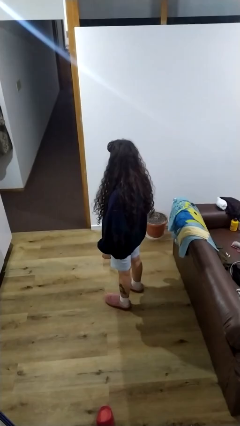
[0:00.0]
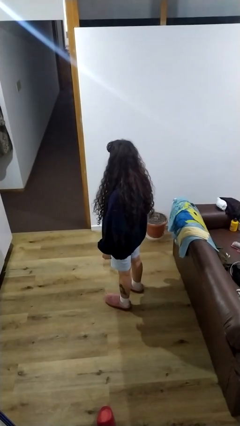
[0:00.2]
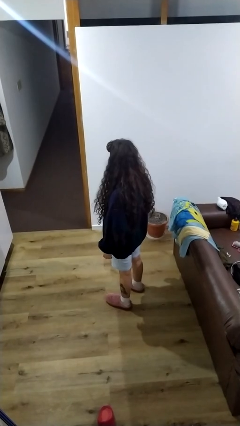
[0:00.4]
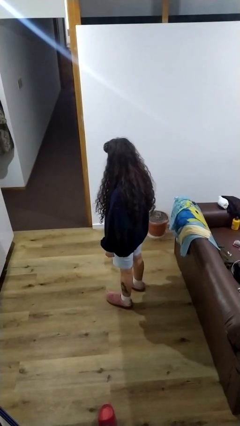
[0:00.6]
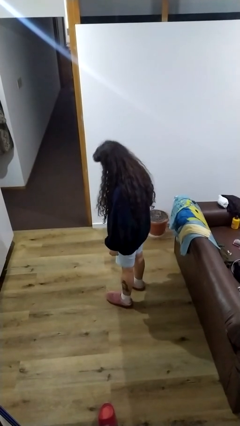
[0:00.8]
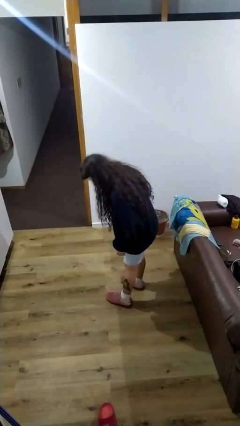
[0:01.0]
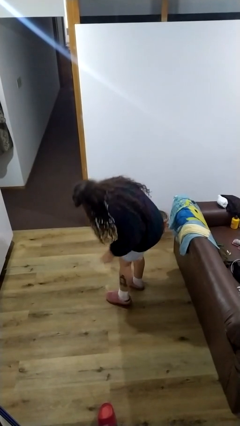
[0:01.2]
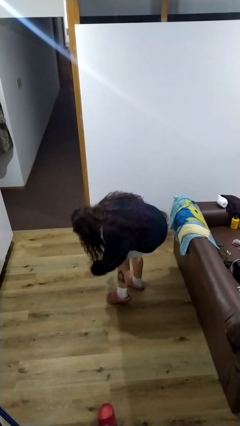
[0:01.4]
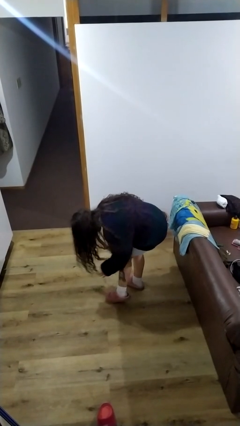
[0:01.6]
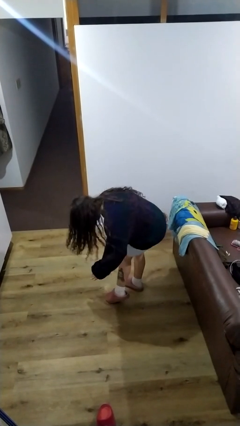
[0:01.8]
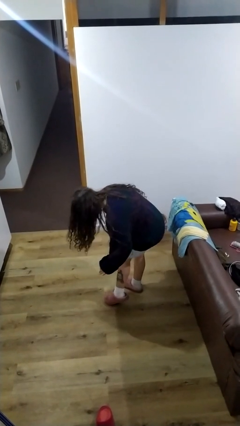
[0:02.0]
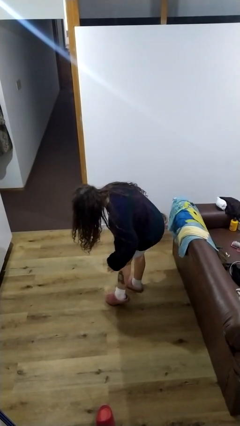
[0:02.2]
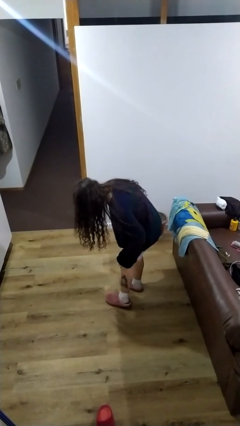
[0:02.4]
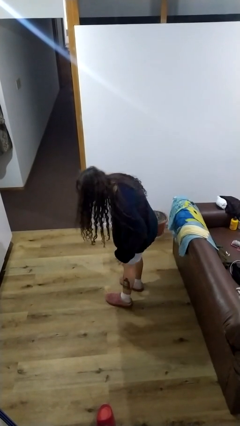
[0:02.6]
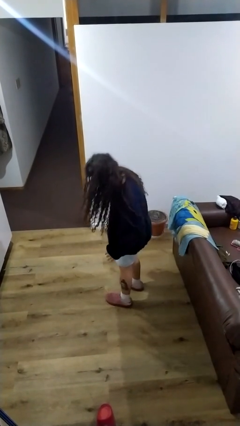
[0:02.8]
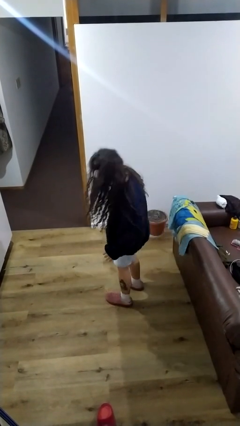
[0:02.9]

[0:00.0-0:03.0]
person swats bug

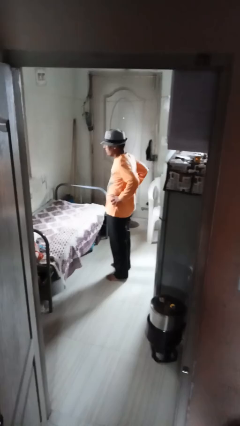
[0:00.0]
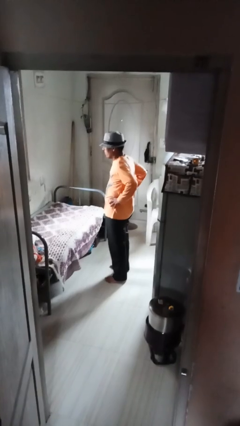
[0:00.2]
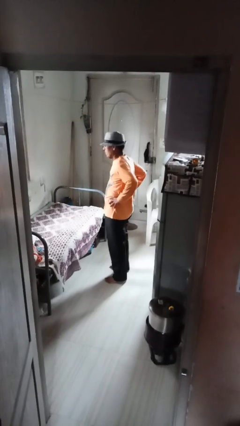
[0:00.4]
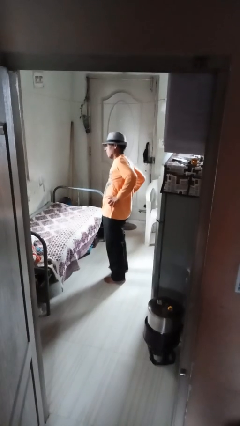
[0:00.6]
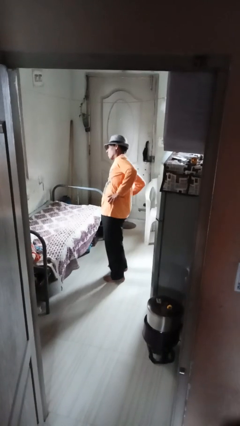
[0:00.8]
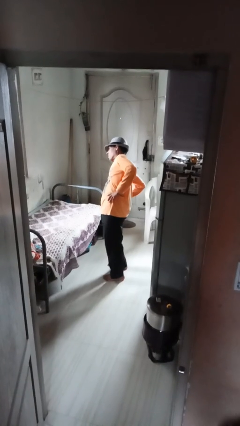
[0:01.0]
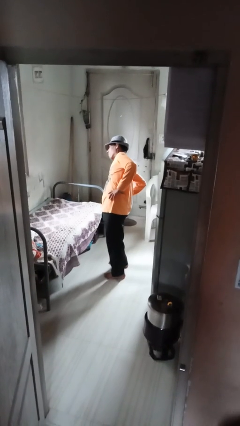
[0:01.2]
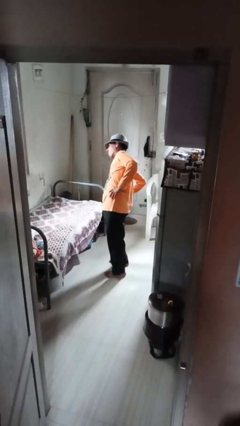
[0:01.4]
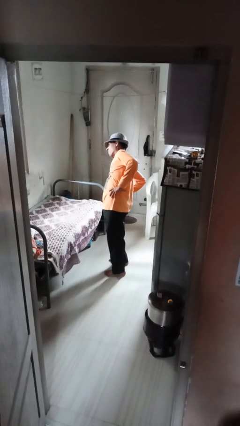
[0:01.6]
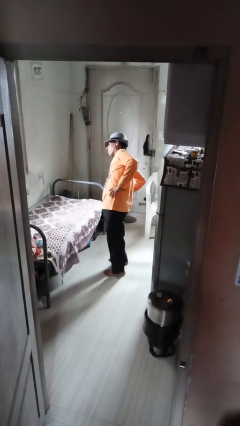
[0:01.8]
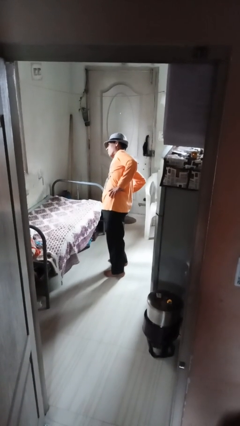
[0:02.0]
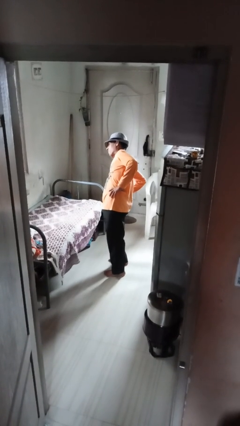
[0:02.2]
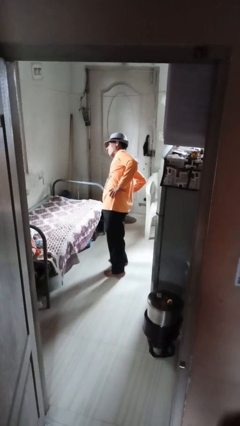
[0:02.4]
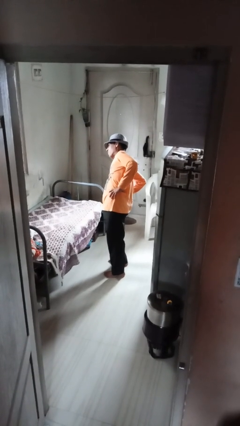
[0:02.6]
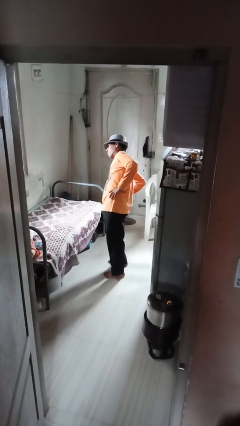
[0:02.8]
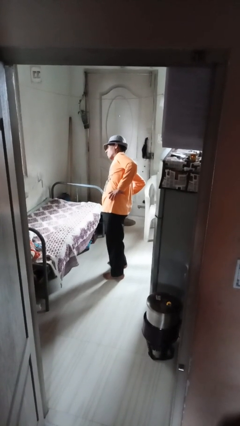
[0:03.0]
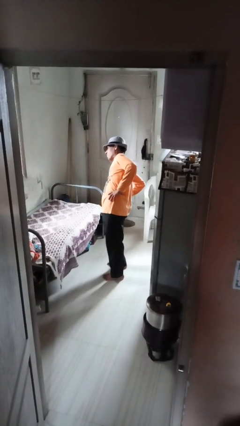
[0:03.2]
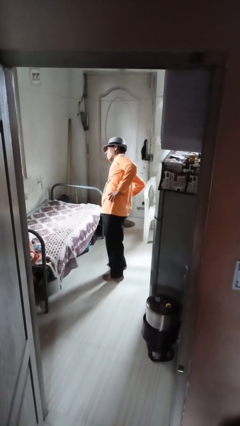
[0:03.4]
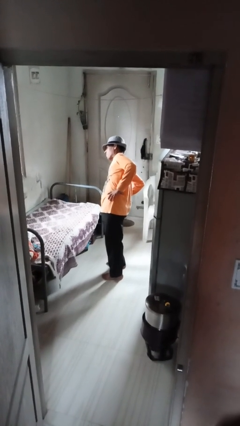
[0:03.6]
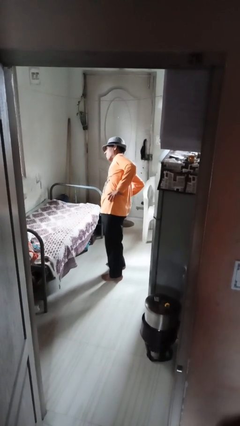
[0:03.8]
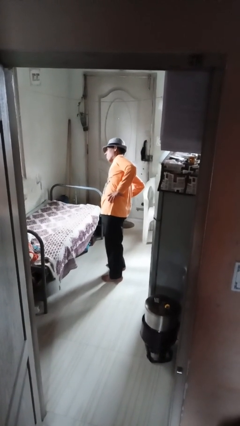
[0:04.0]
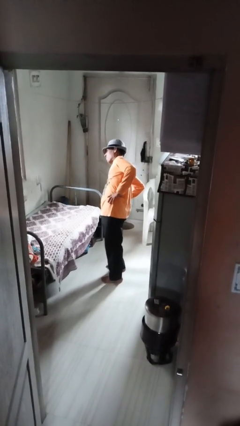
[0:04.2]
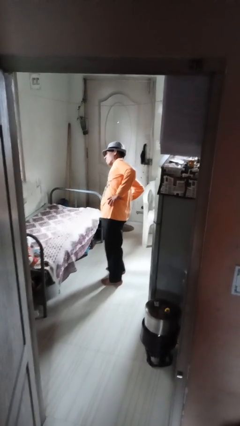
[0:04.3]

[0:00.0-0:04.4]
person stretches arms to side

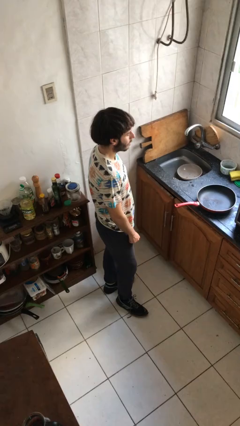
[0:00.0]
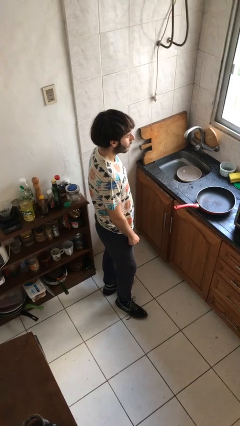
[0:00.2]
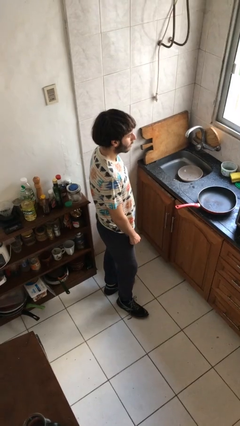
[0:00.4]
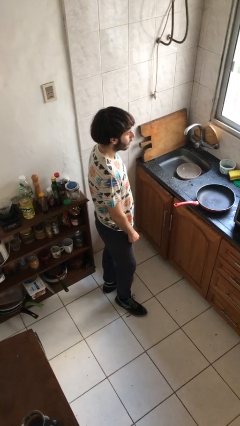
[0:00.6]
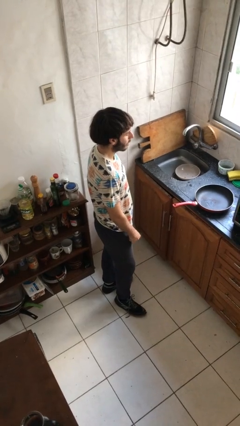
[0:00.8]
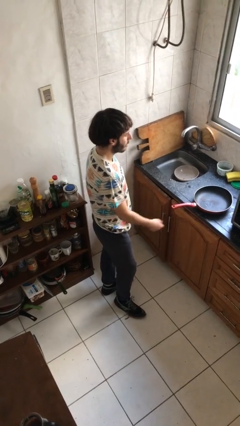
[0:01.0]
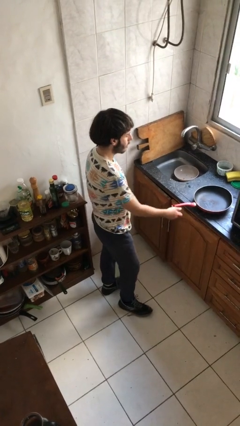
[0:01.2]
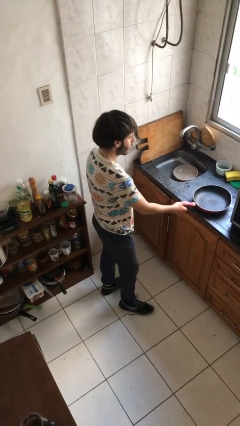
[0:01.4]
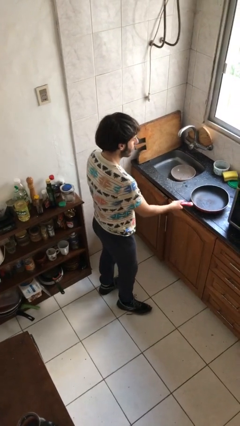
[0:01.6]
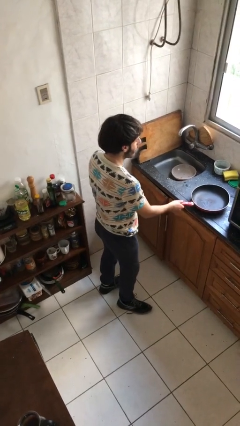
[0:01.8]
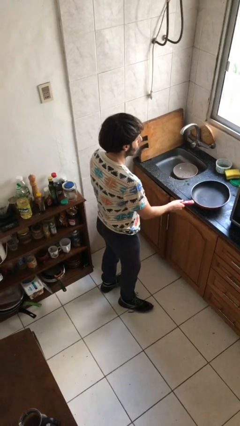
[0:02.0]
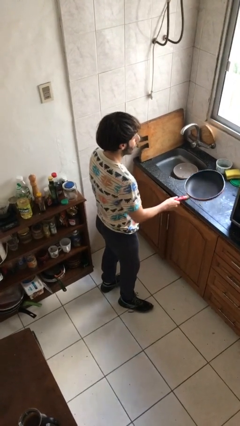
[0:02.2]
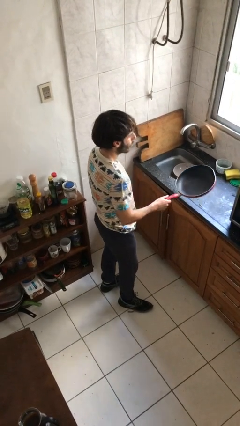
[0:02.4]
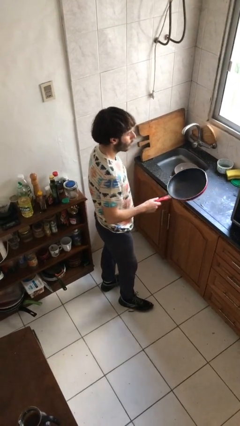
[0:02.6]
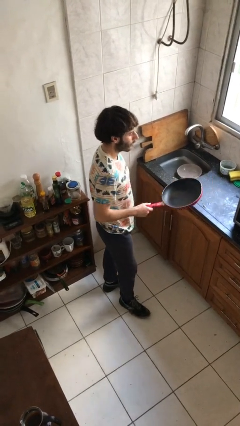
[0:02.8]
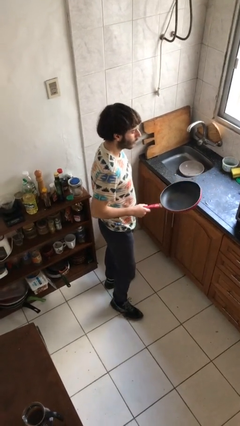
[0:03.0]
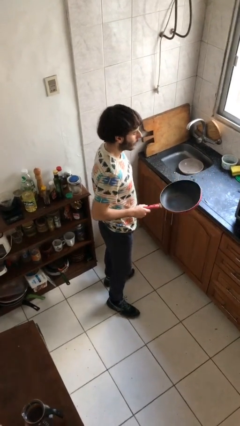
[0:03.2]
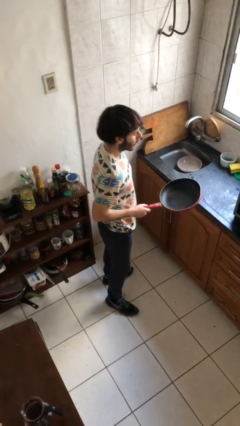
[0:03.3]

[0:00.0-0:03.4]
person picks up object from countertop

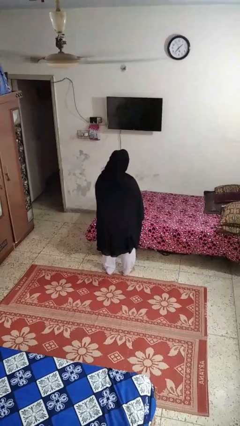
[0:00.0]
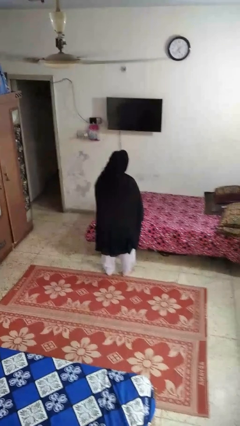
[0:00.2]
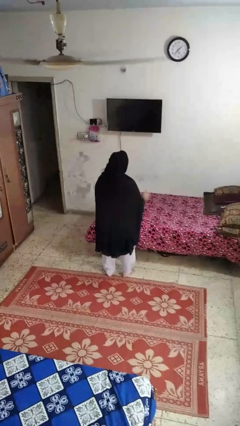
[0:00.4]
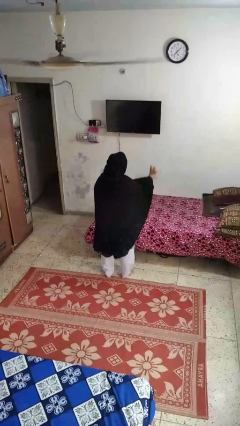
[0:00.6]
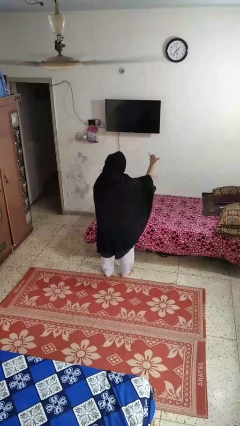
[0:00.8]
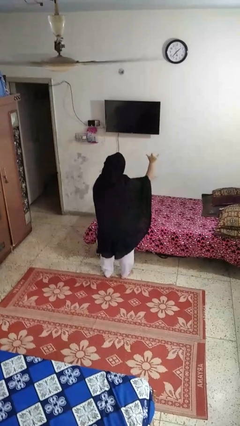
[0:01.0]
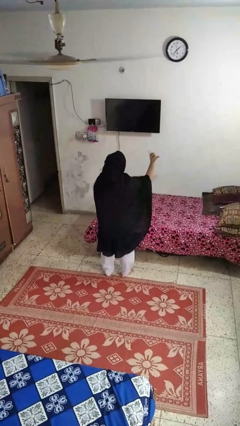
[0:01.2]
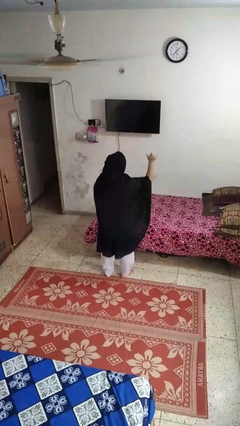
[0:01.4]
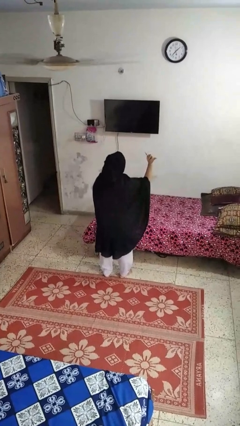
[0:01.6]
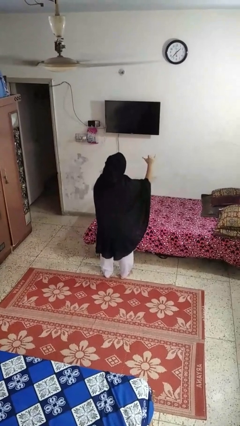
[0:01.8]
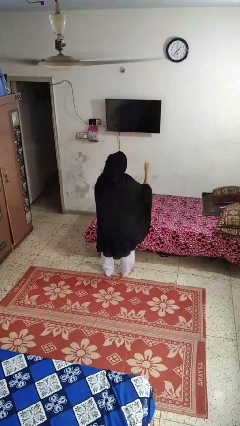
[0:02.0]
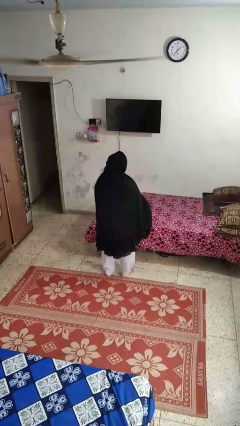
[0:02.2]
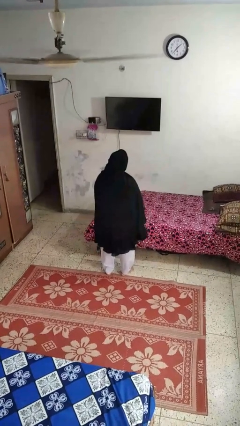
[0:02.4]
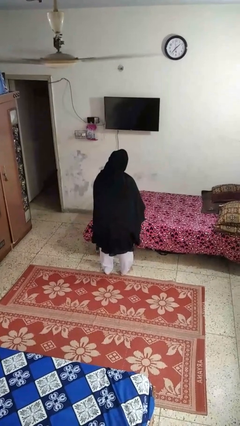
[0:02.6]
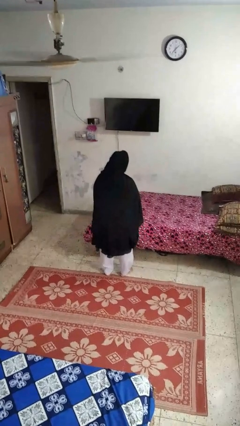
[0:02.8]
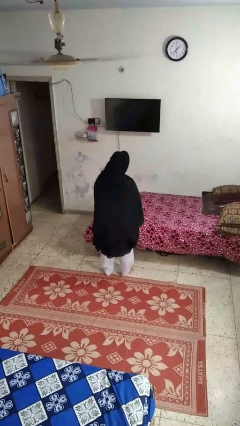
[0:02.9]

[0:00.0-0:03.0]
person gestures hang loose

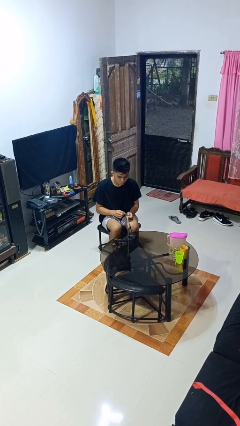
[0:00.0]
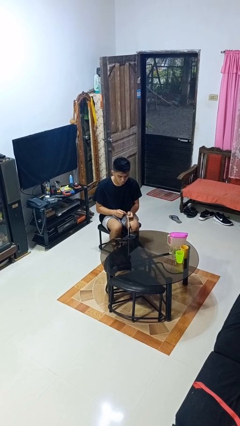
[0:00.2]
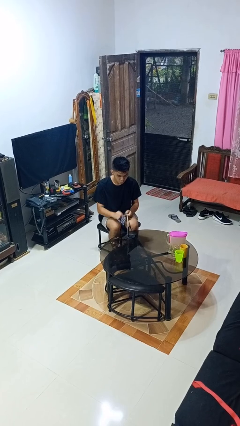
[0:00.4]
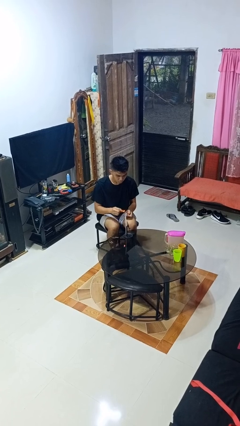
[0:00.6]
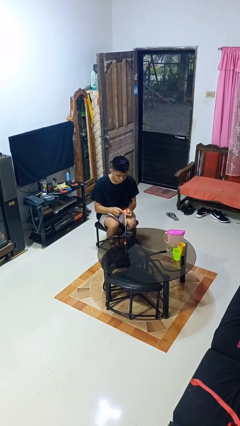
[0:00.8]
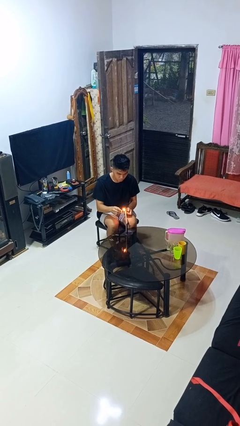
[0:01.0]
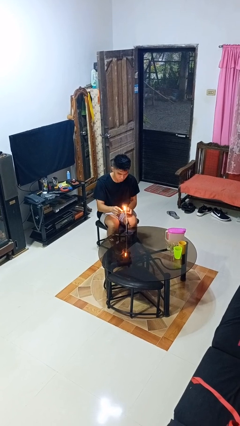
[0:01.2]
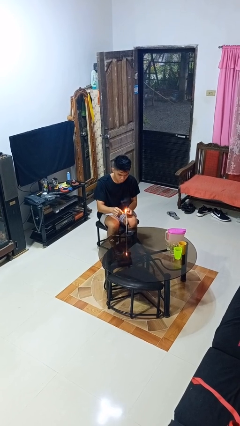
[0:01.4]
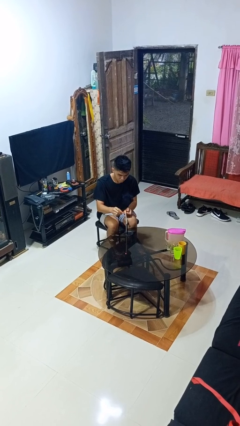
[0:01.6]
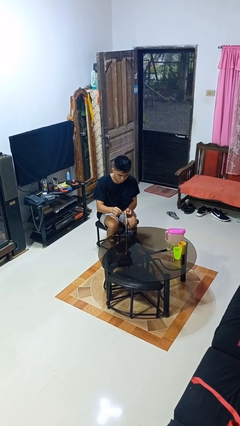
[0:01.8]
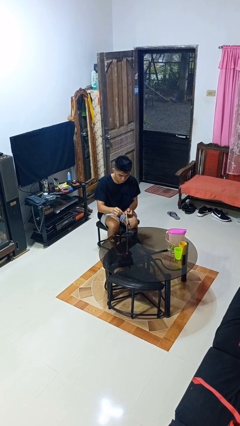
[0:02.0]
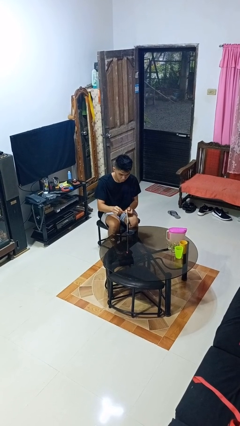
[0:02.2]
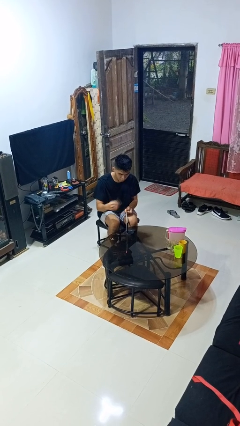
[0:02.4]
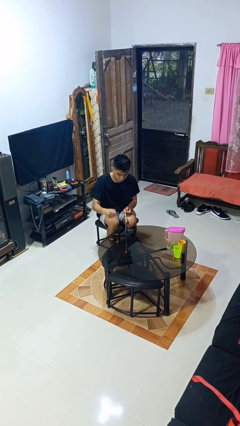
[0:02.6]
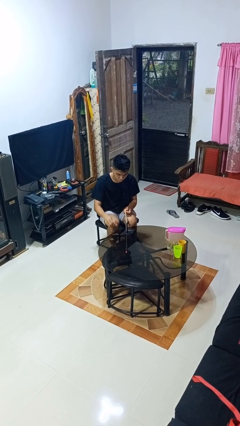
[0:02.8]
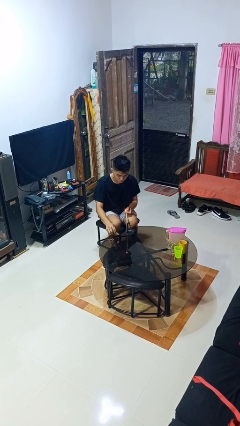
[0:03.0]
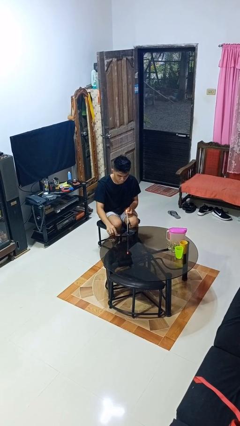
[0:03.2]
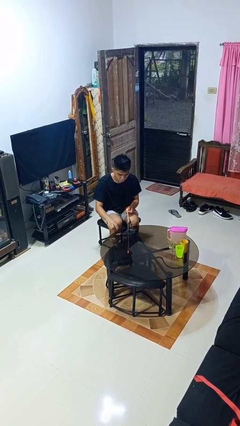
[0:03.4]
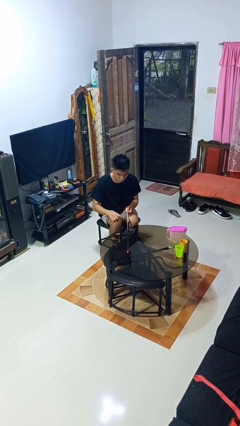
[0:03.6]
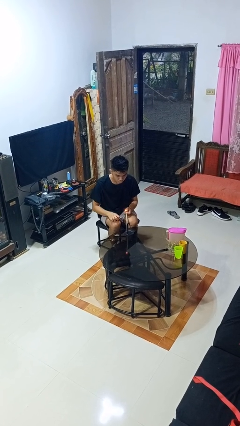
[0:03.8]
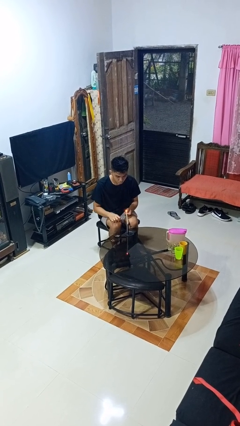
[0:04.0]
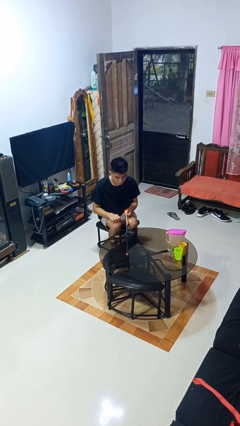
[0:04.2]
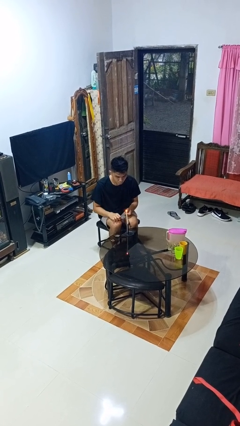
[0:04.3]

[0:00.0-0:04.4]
person lights candle
